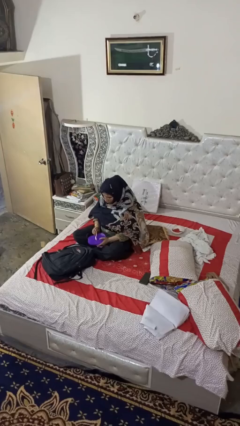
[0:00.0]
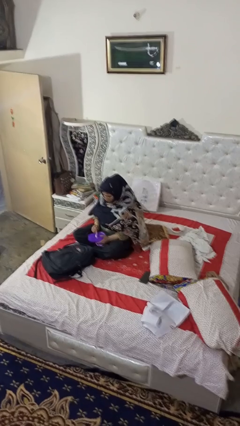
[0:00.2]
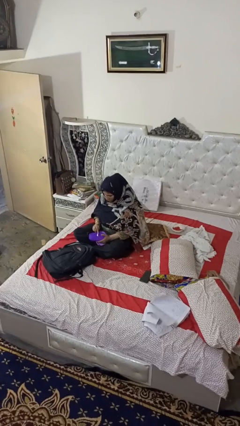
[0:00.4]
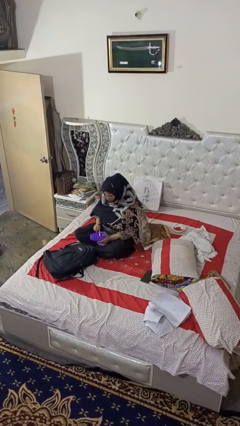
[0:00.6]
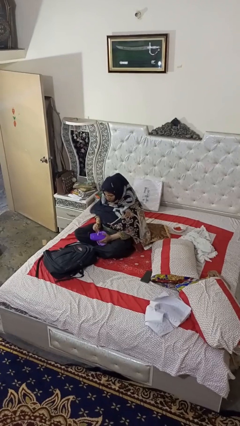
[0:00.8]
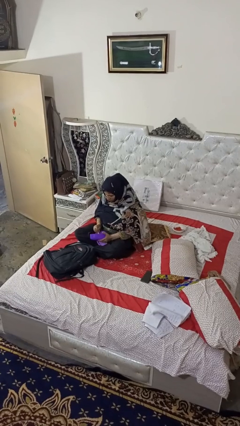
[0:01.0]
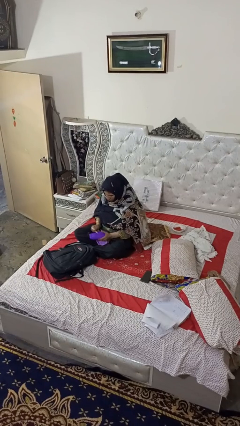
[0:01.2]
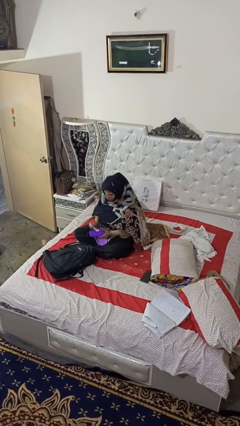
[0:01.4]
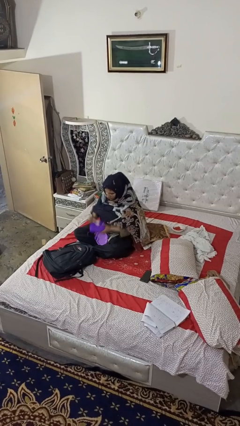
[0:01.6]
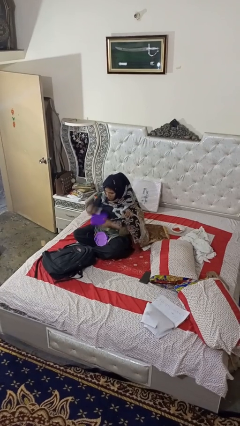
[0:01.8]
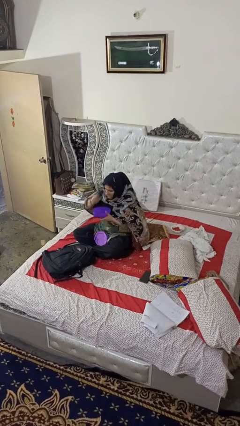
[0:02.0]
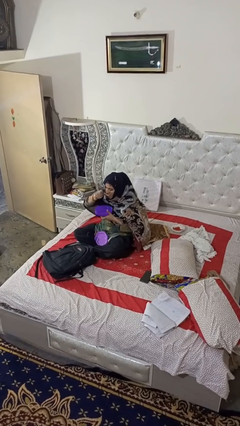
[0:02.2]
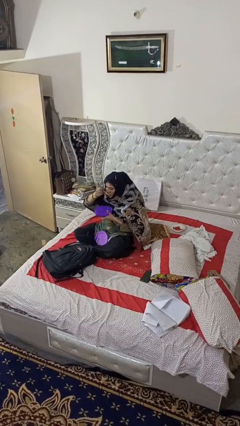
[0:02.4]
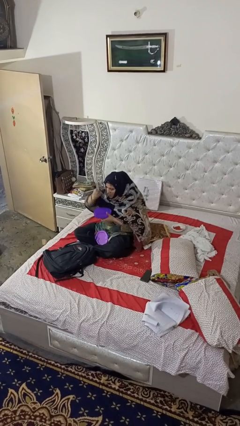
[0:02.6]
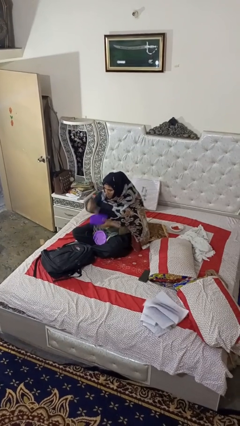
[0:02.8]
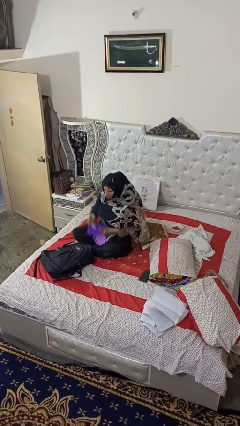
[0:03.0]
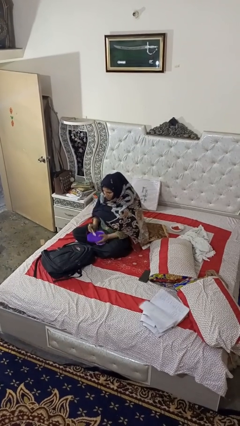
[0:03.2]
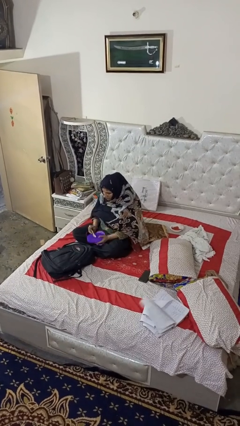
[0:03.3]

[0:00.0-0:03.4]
person eats snack from bag

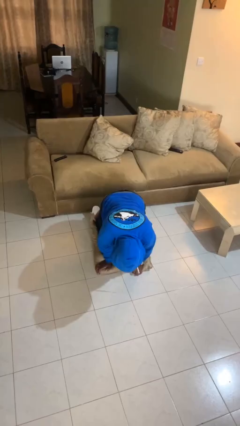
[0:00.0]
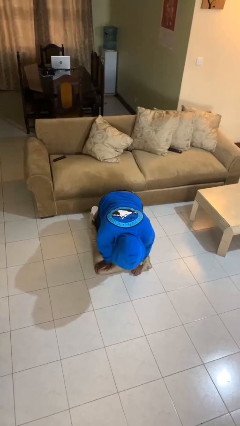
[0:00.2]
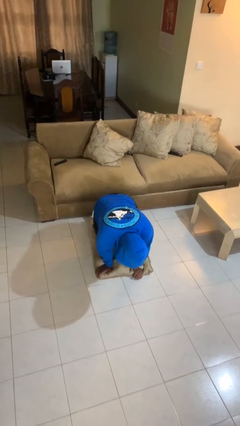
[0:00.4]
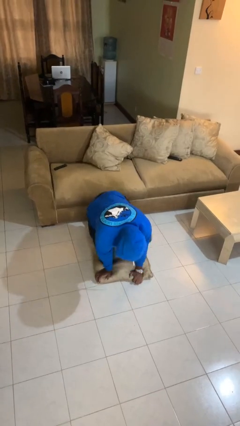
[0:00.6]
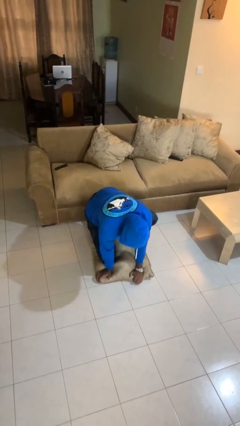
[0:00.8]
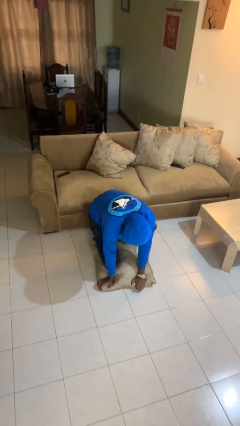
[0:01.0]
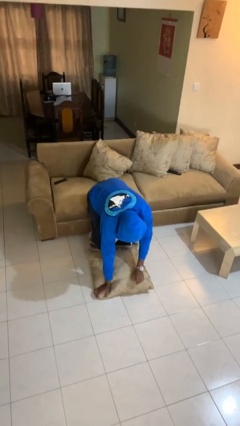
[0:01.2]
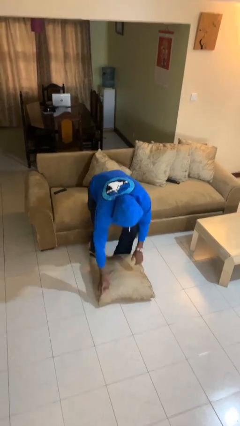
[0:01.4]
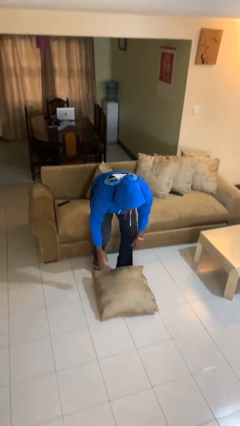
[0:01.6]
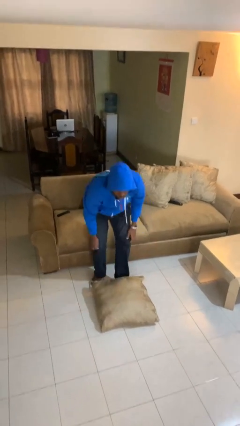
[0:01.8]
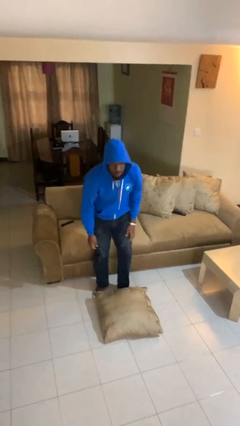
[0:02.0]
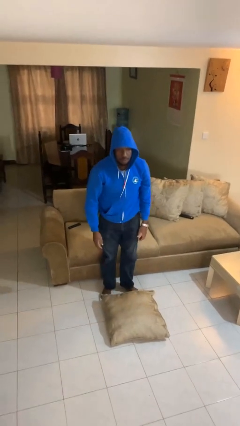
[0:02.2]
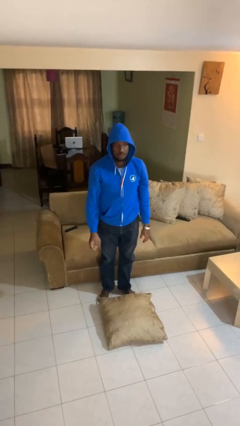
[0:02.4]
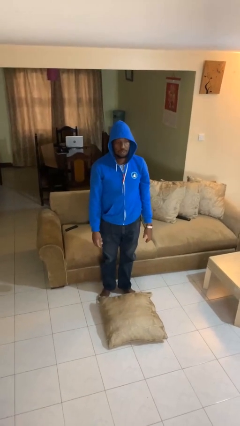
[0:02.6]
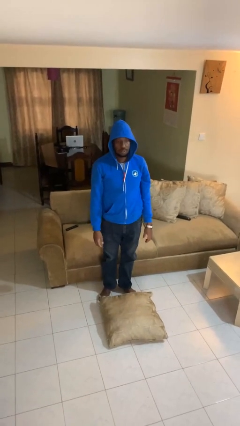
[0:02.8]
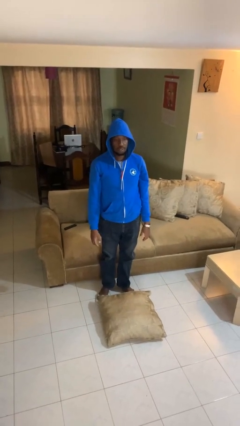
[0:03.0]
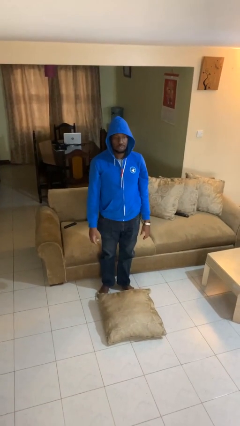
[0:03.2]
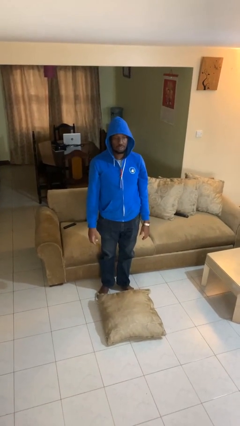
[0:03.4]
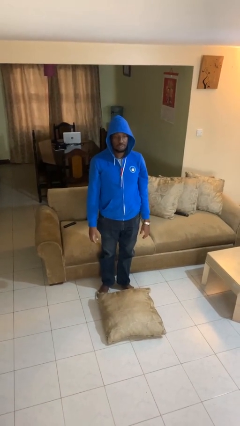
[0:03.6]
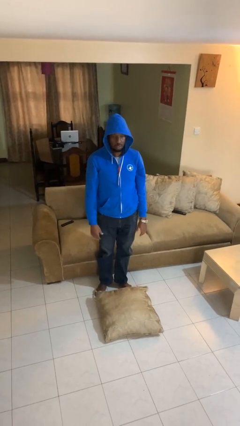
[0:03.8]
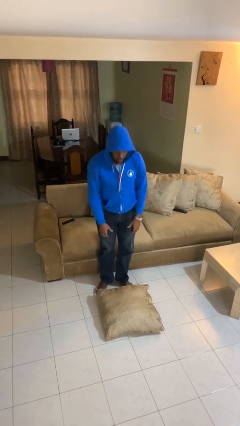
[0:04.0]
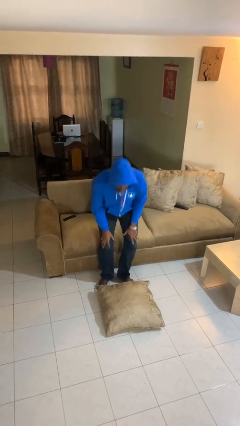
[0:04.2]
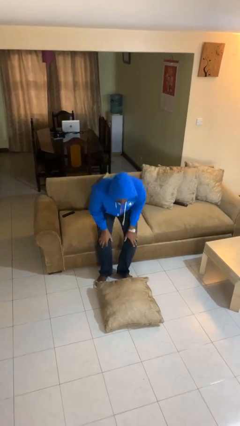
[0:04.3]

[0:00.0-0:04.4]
person stands up from floor

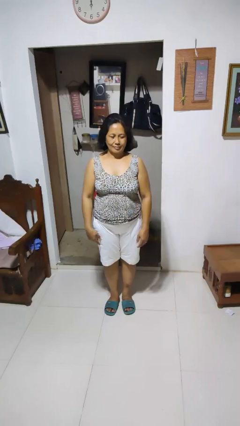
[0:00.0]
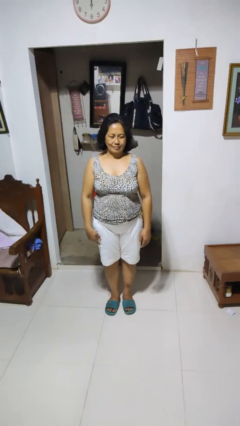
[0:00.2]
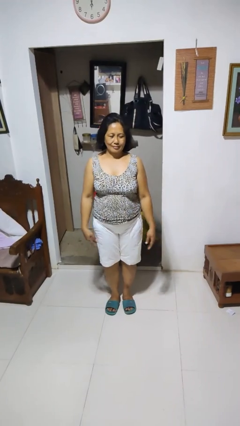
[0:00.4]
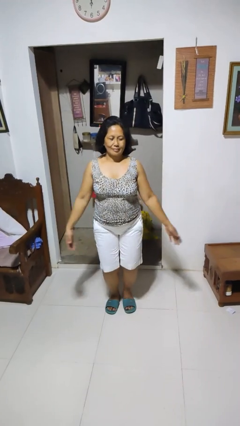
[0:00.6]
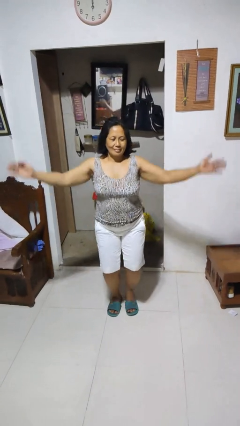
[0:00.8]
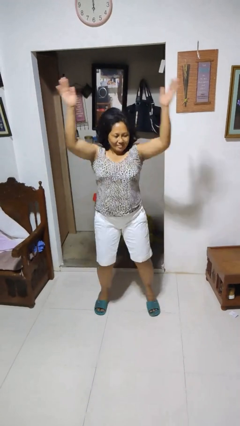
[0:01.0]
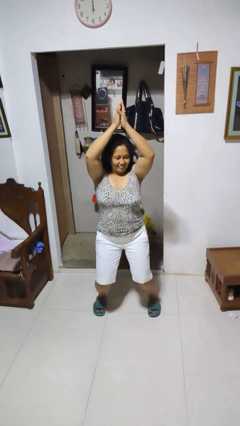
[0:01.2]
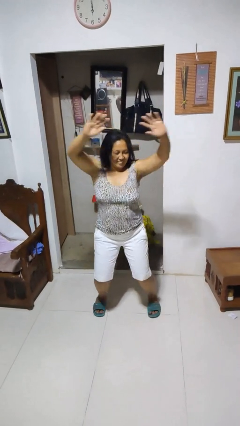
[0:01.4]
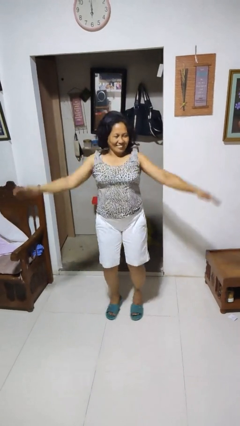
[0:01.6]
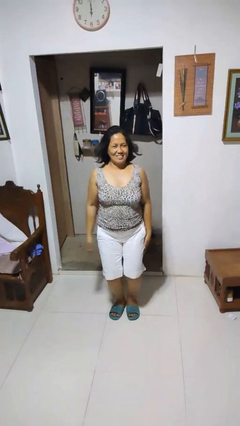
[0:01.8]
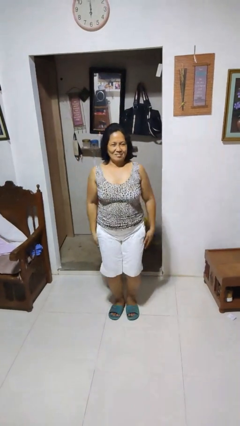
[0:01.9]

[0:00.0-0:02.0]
person exercises with jumping jacks

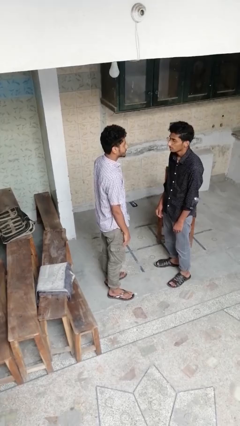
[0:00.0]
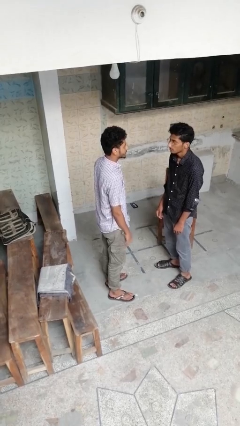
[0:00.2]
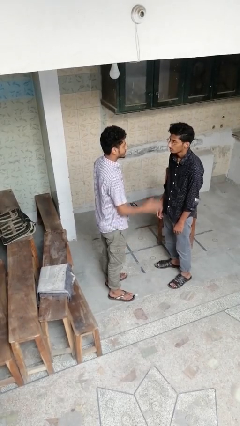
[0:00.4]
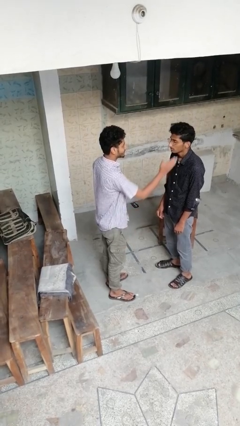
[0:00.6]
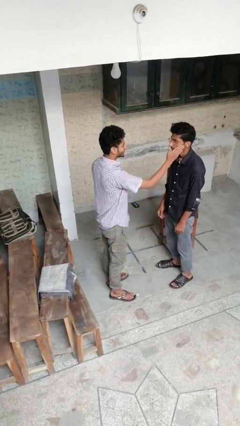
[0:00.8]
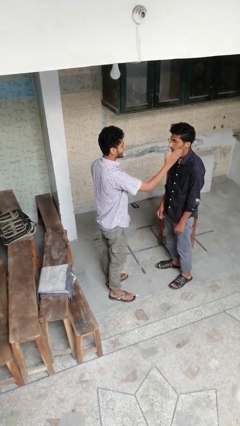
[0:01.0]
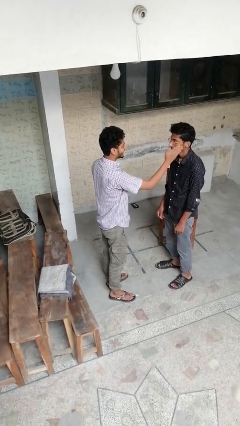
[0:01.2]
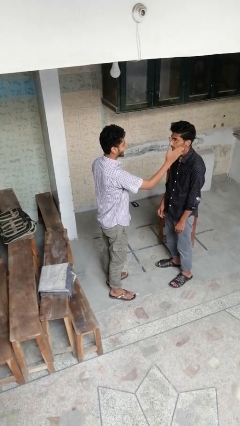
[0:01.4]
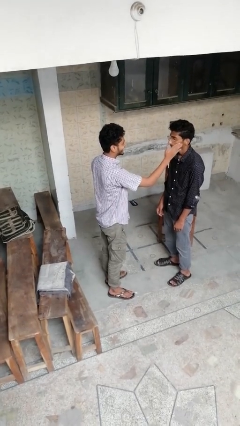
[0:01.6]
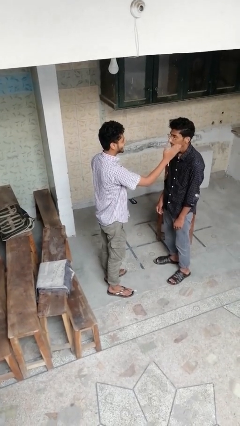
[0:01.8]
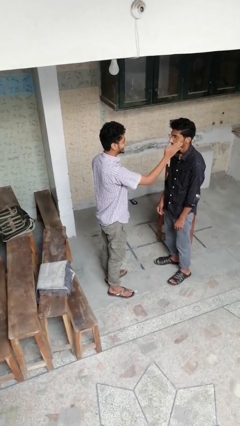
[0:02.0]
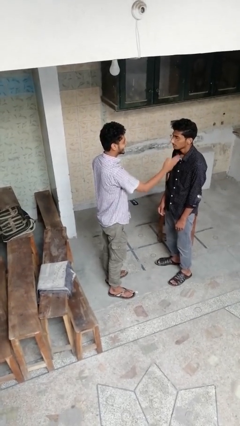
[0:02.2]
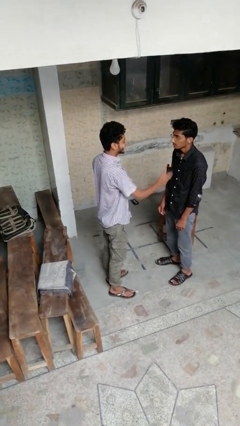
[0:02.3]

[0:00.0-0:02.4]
person touches face of person

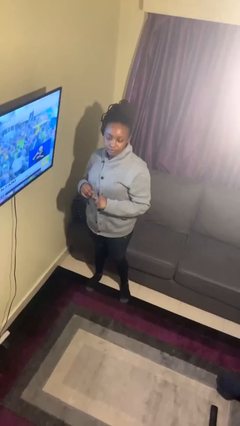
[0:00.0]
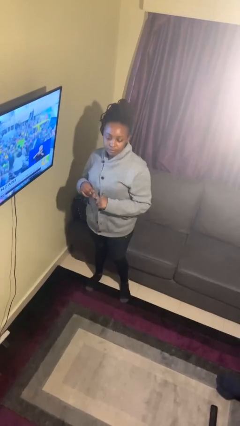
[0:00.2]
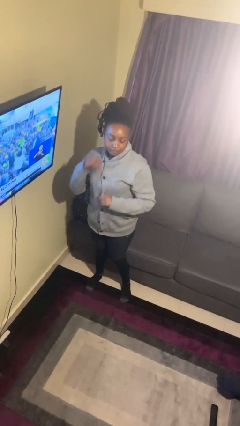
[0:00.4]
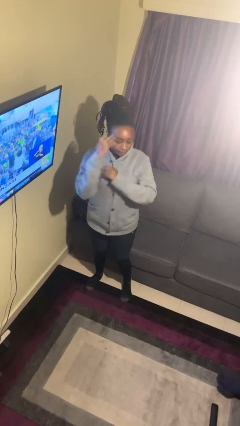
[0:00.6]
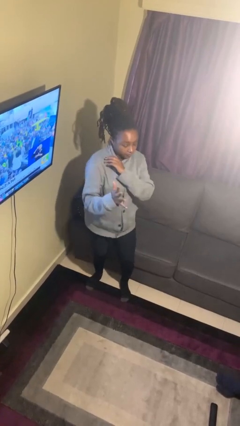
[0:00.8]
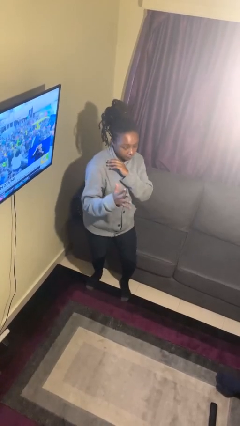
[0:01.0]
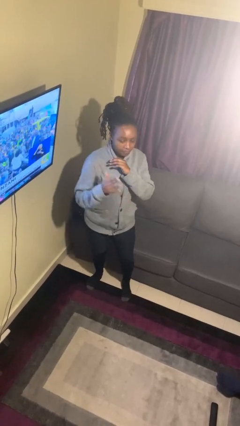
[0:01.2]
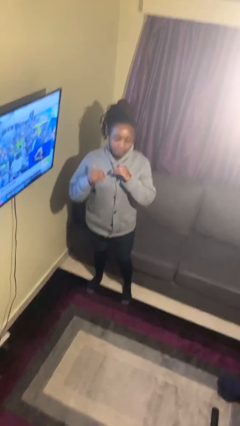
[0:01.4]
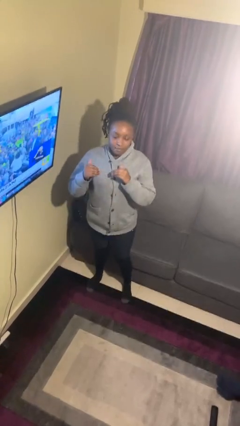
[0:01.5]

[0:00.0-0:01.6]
person karate chop

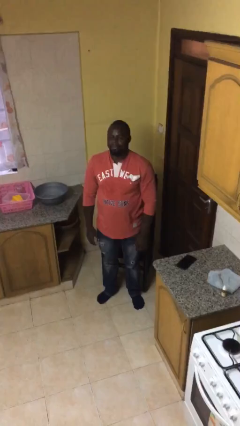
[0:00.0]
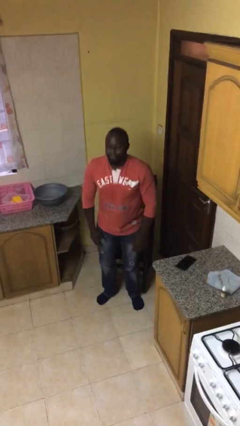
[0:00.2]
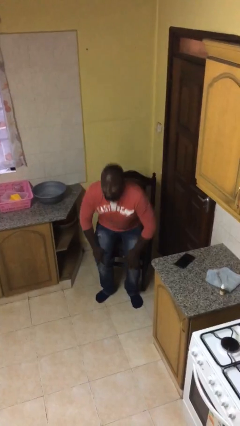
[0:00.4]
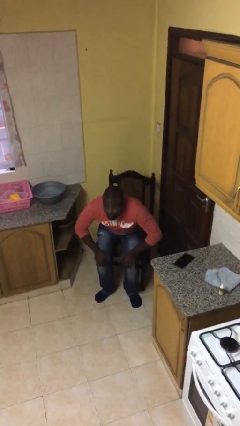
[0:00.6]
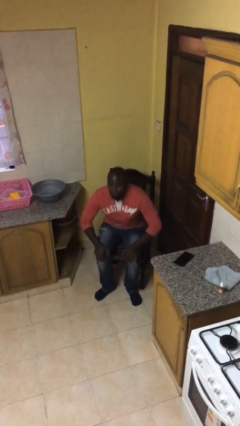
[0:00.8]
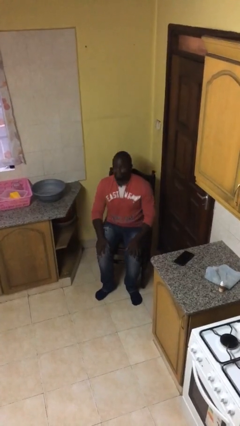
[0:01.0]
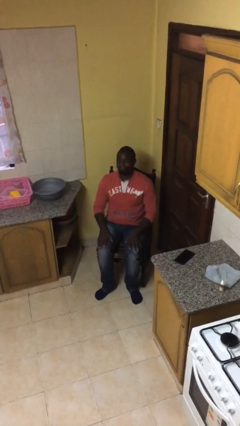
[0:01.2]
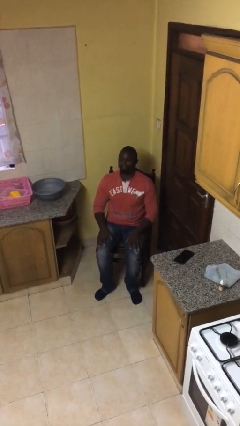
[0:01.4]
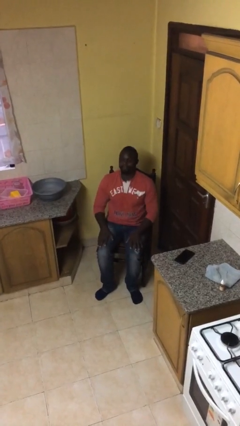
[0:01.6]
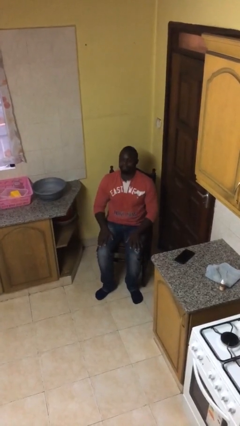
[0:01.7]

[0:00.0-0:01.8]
person sits down

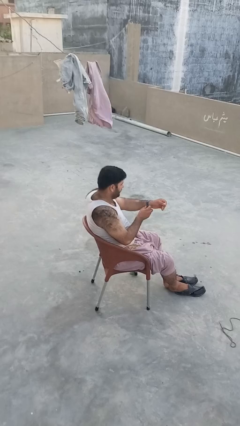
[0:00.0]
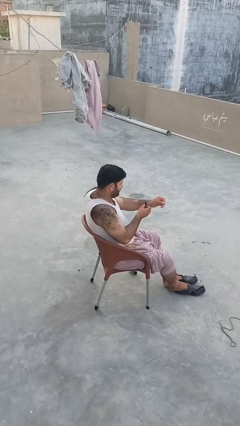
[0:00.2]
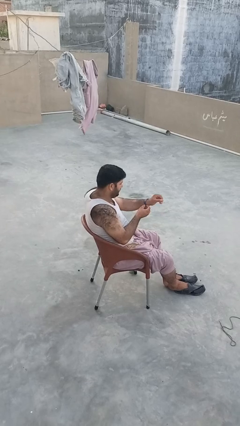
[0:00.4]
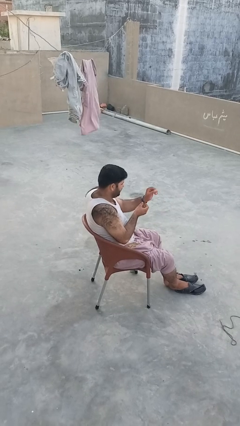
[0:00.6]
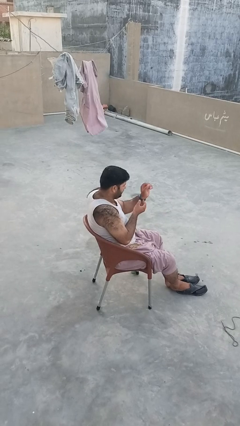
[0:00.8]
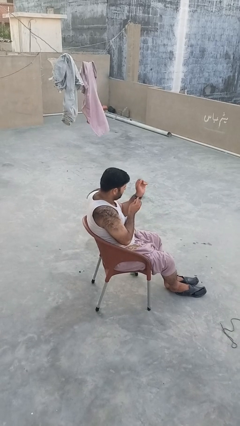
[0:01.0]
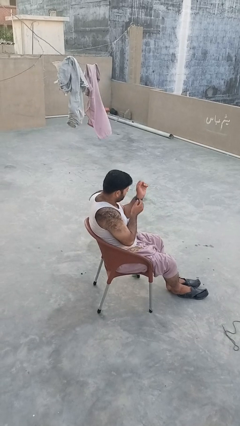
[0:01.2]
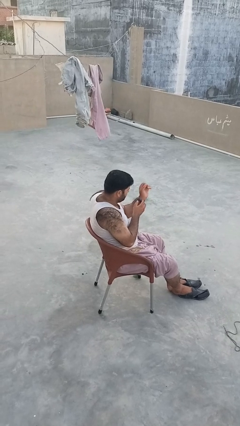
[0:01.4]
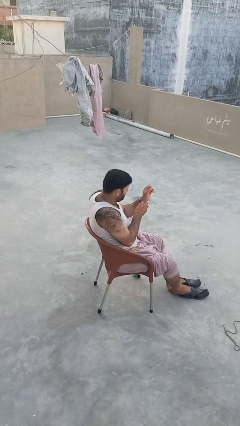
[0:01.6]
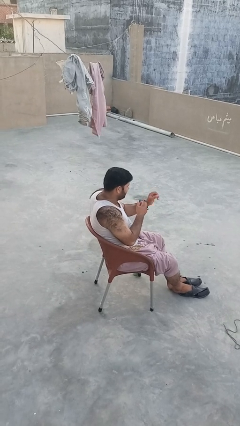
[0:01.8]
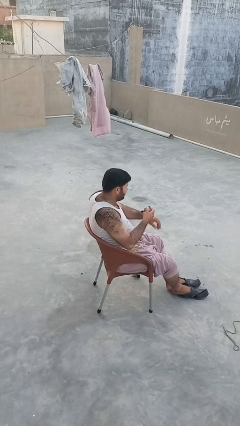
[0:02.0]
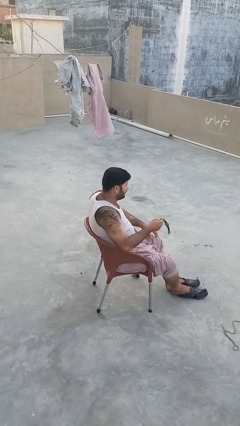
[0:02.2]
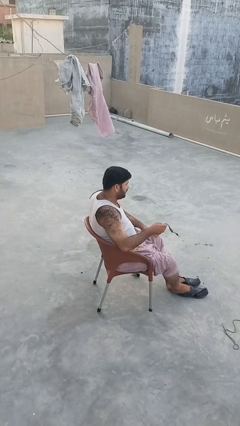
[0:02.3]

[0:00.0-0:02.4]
person takes off wristwatch
